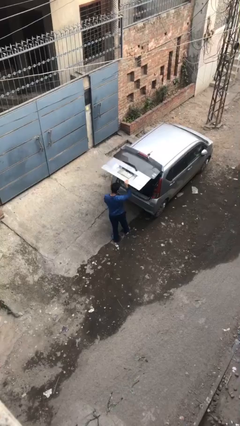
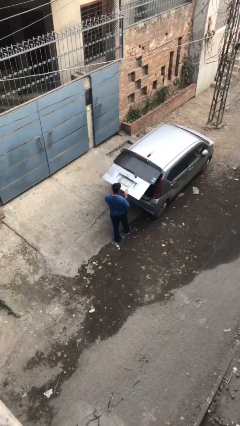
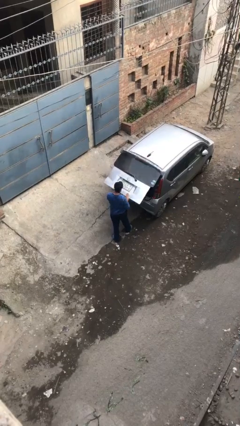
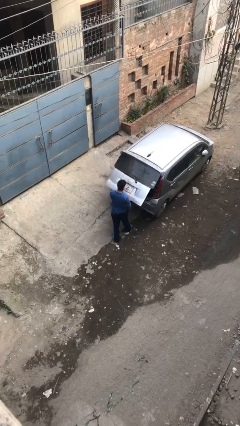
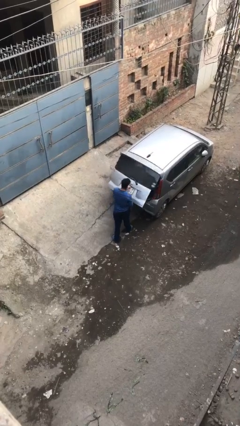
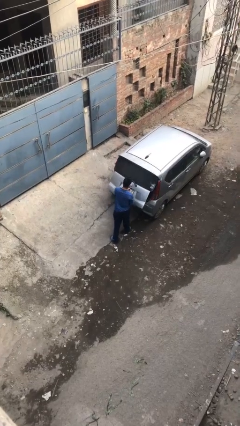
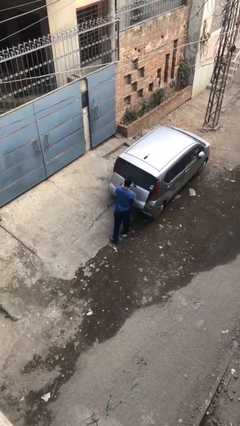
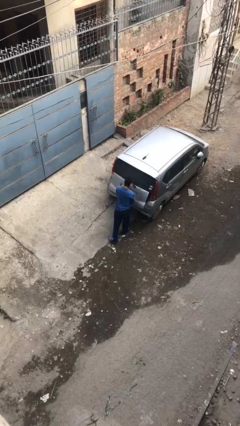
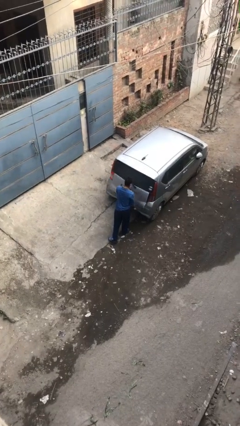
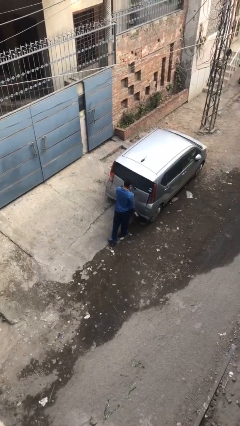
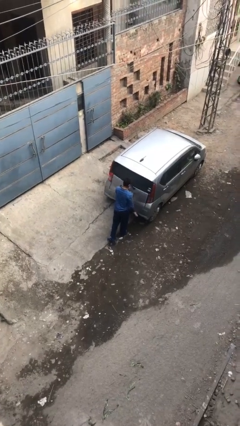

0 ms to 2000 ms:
person closes car trunk

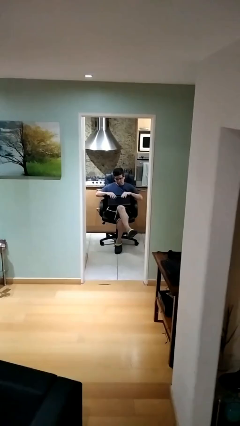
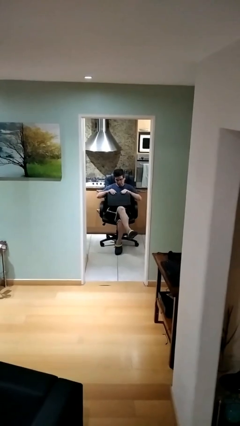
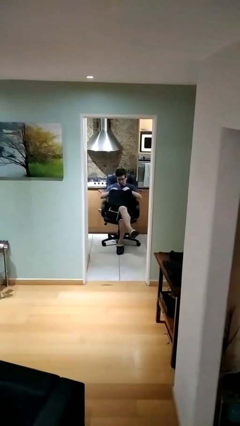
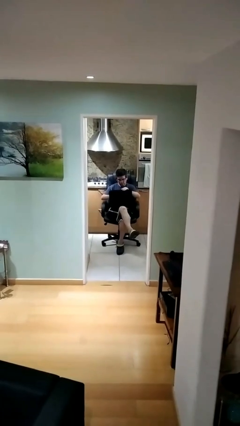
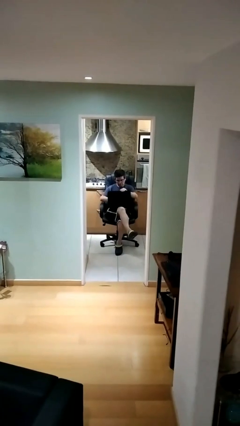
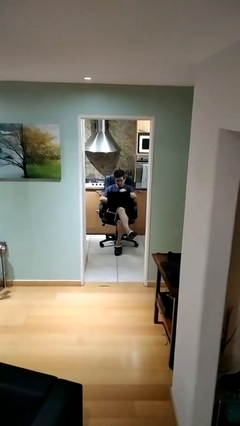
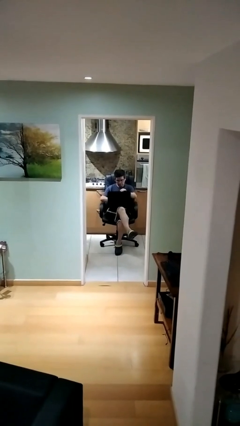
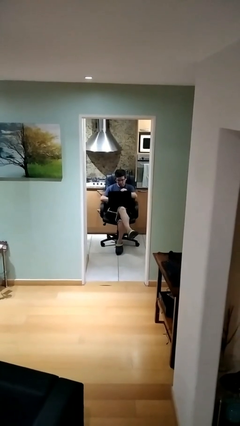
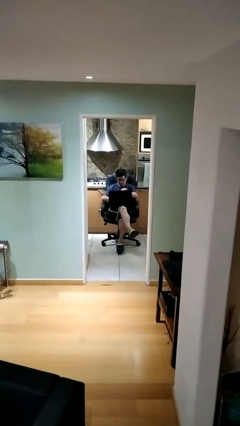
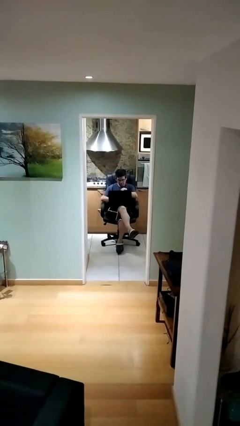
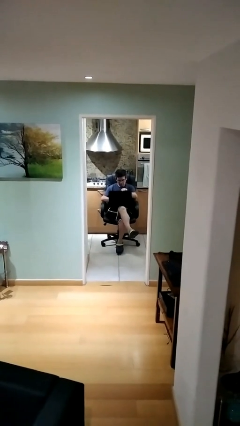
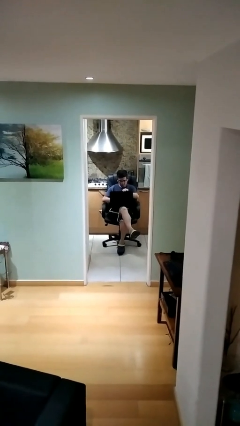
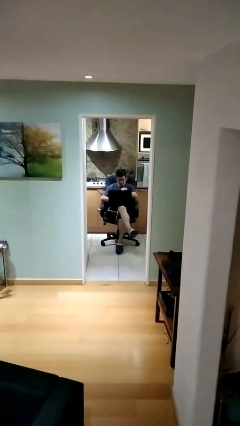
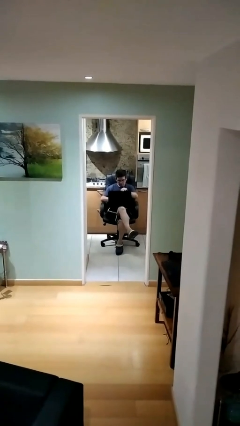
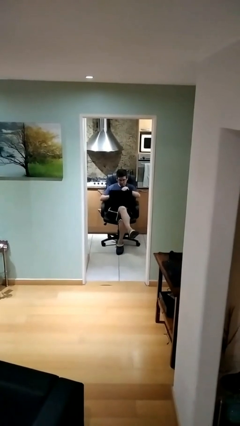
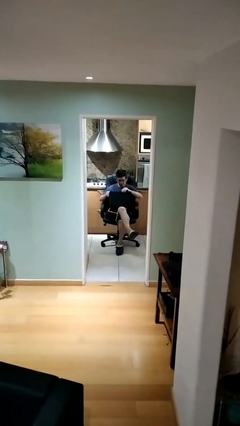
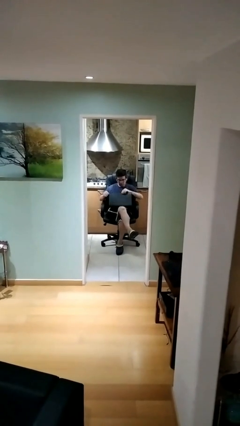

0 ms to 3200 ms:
person interacts with laptop

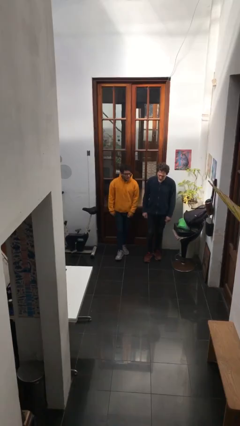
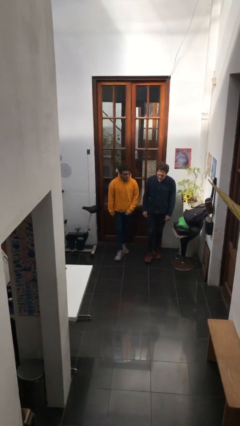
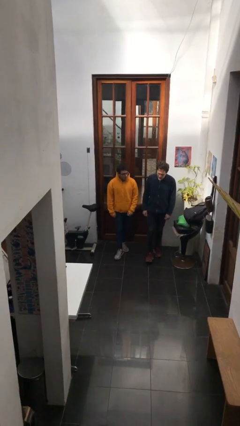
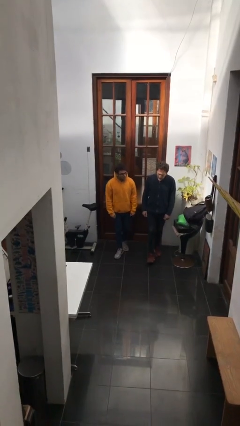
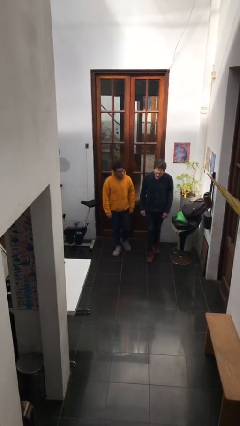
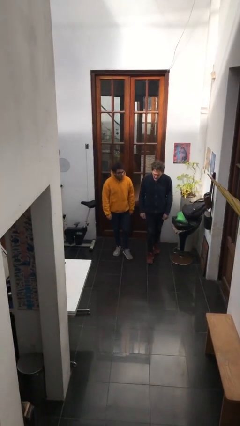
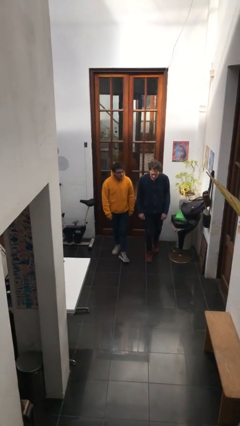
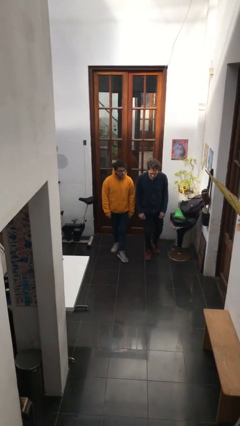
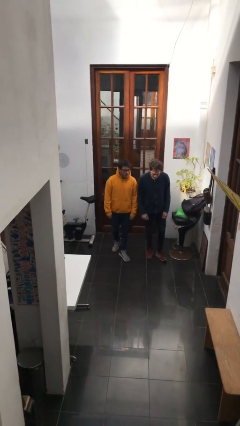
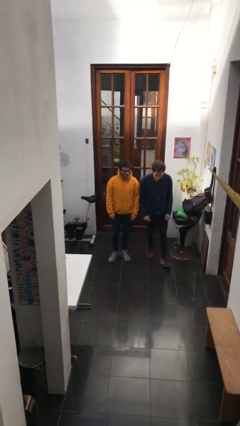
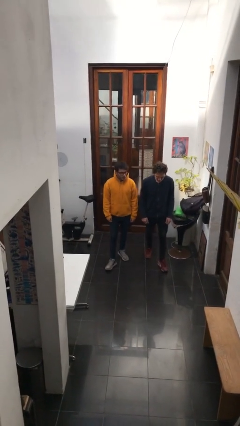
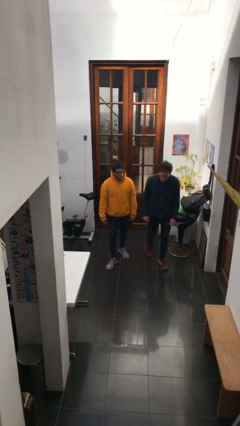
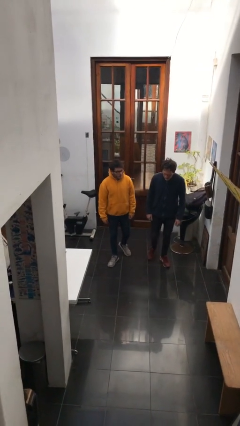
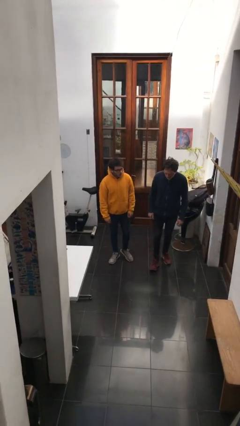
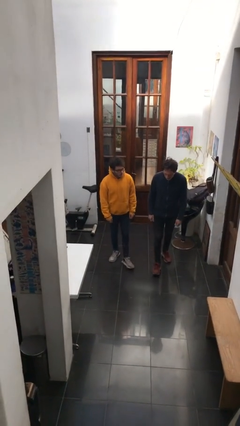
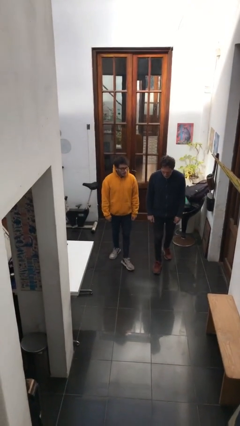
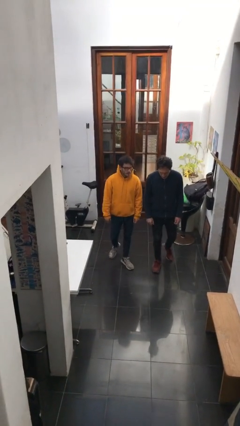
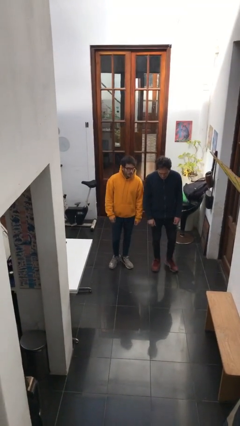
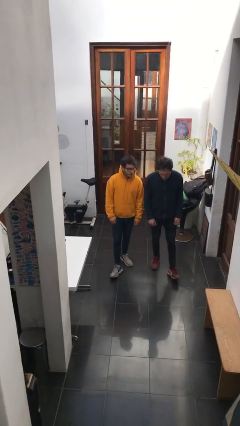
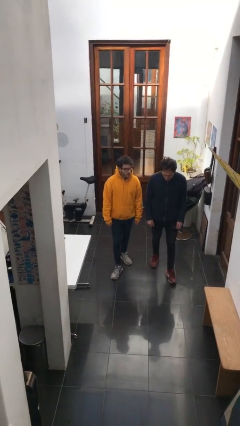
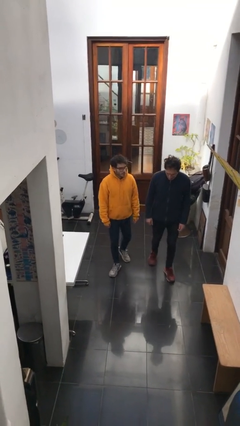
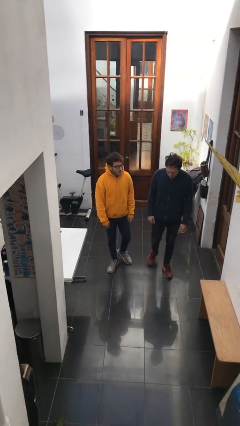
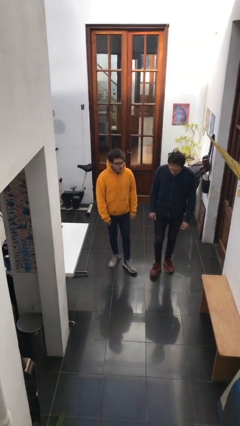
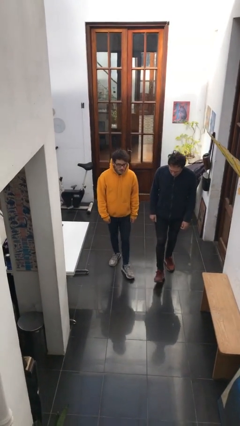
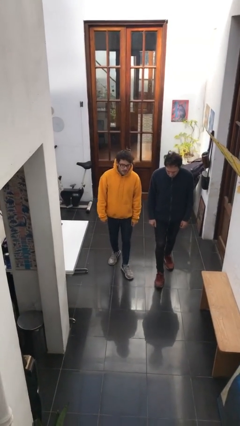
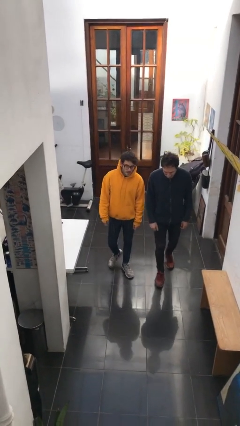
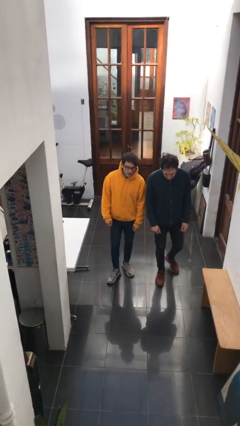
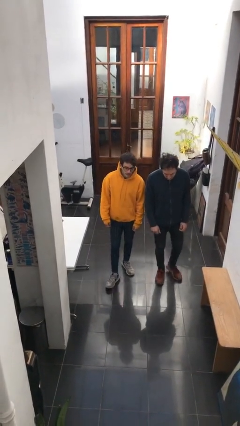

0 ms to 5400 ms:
person talks to person

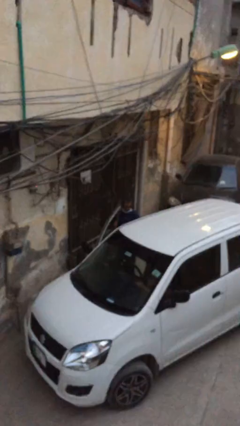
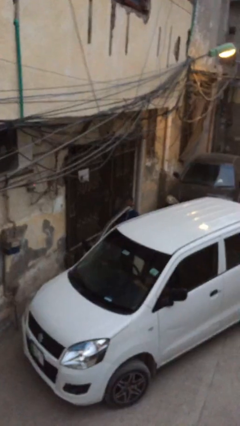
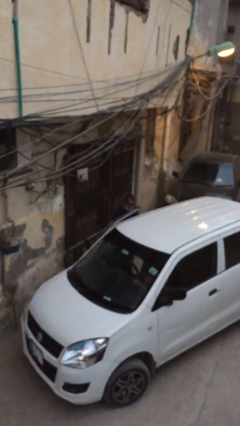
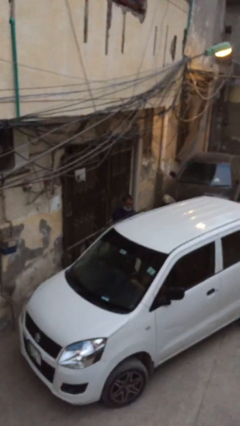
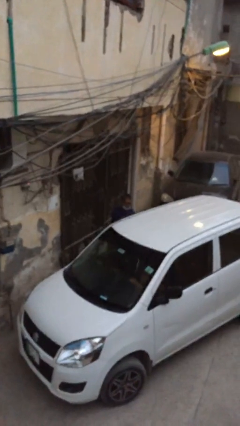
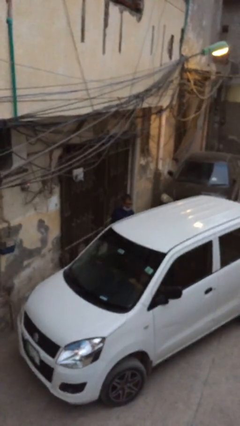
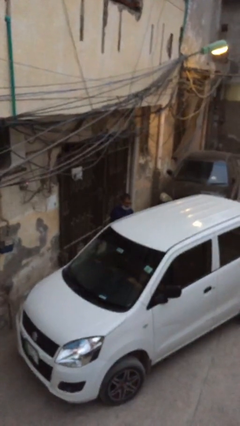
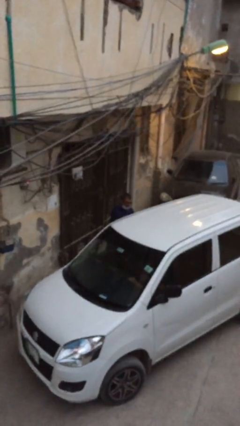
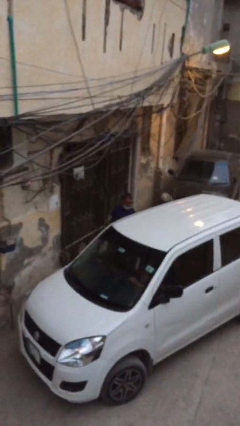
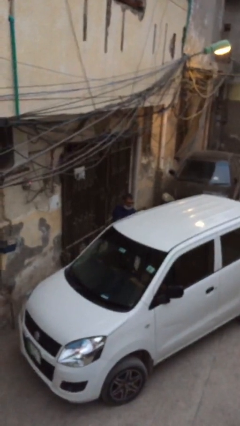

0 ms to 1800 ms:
person closes car door

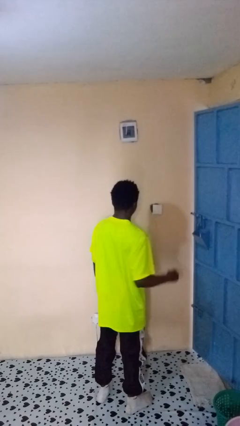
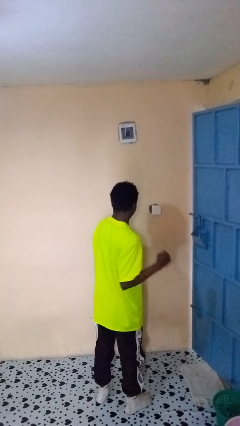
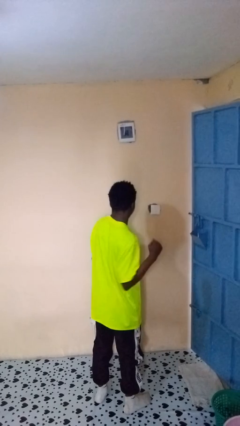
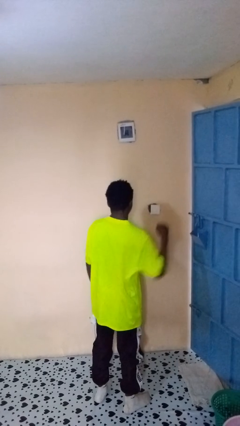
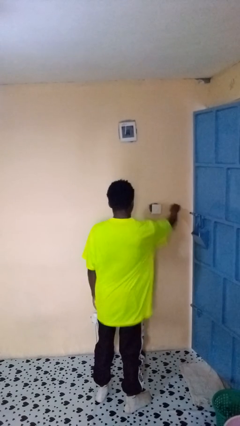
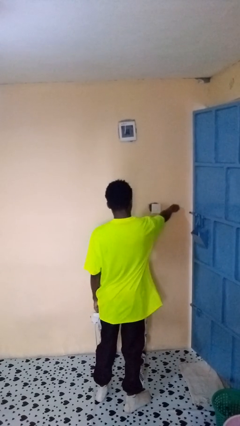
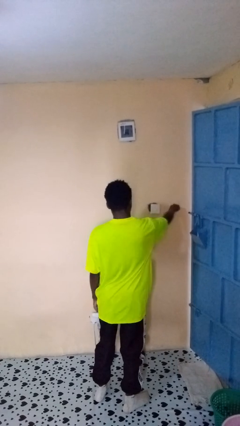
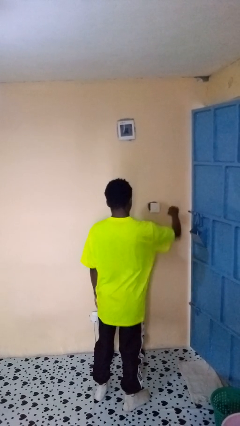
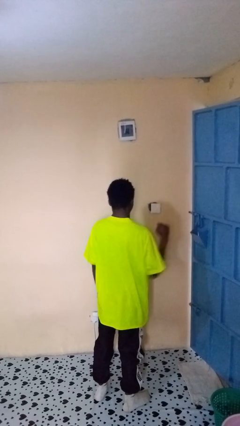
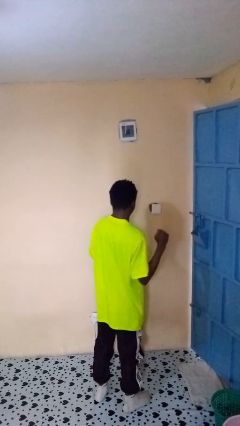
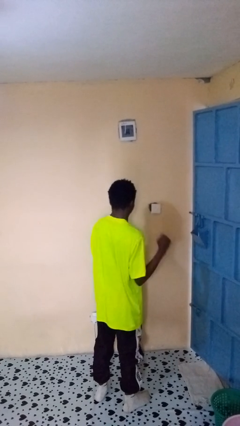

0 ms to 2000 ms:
person punches

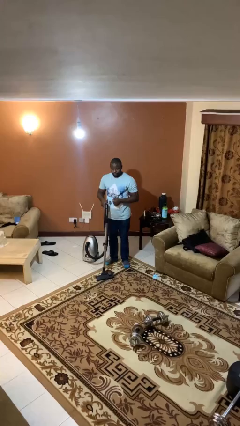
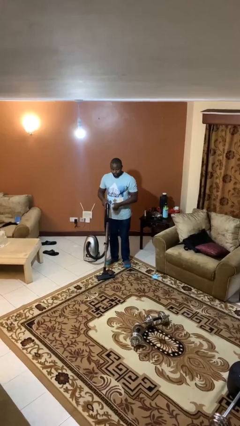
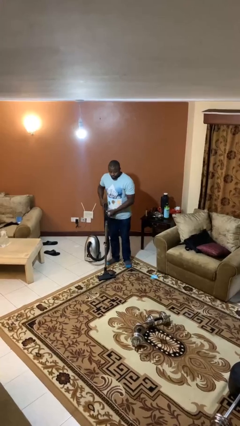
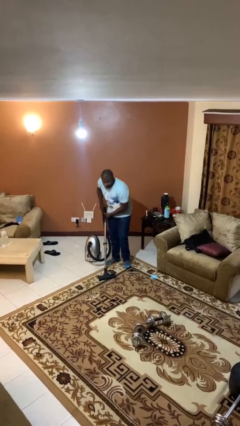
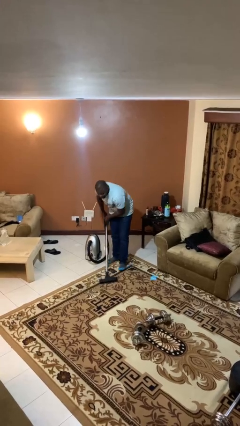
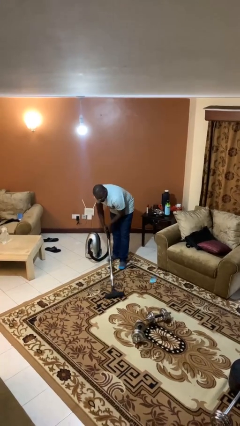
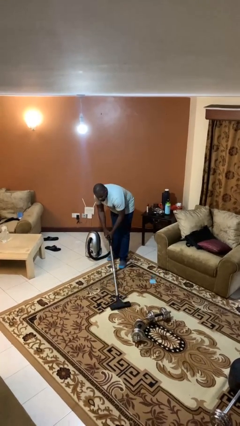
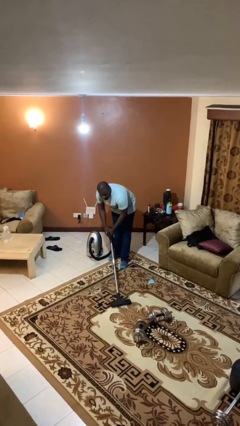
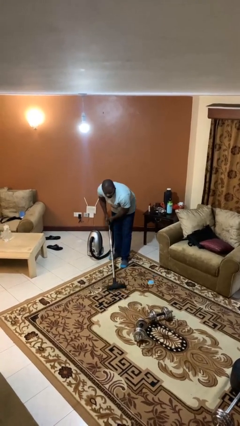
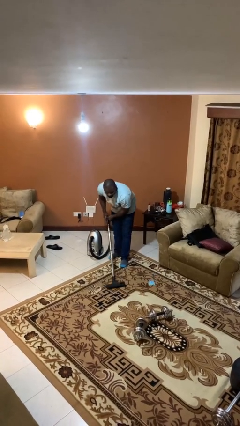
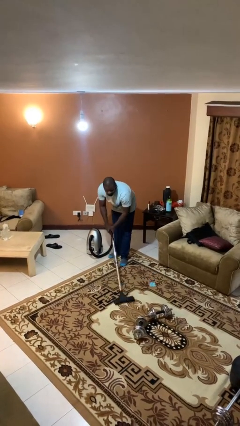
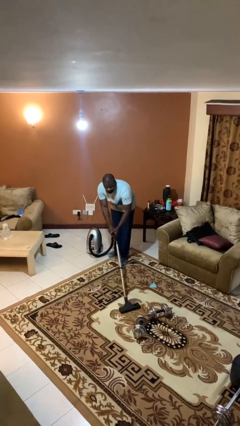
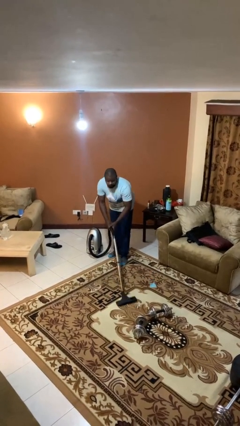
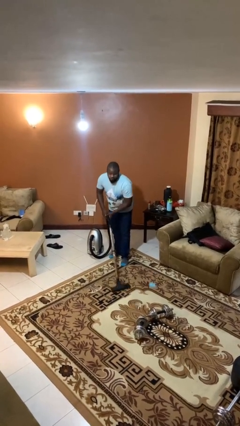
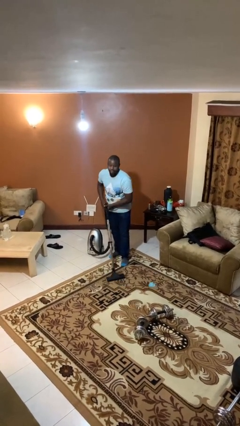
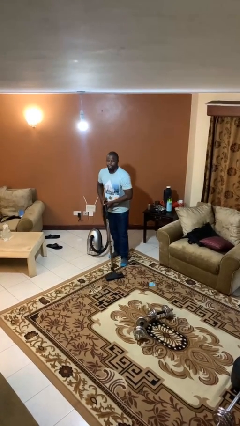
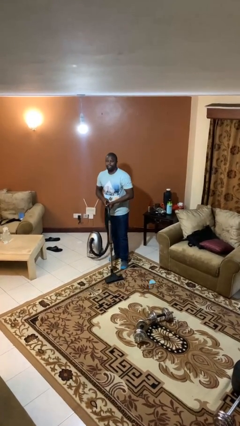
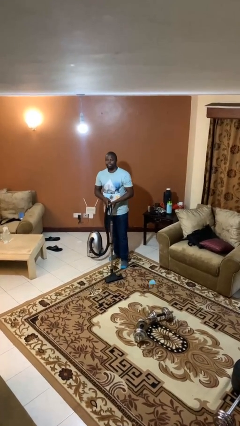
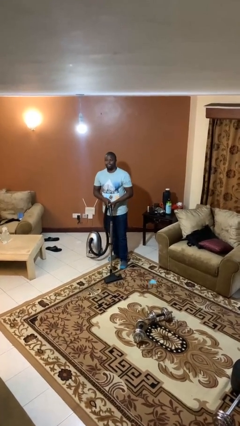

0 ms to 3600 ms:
person vacuums carpet
